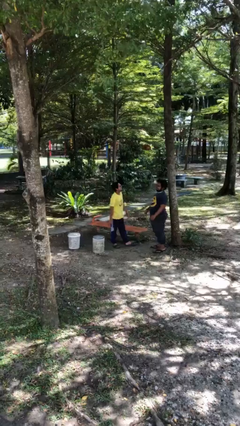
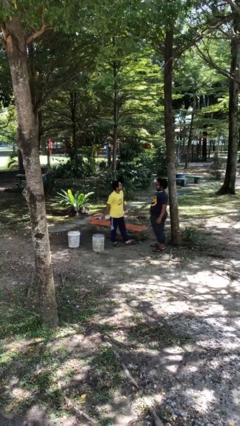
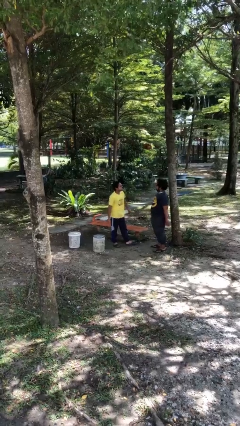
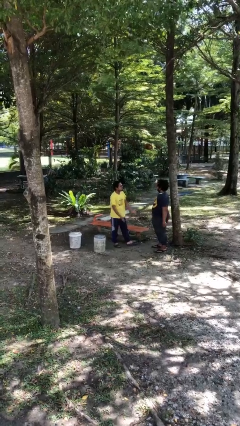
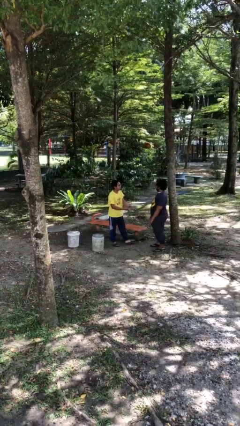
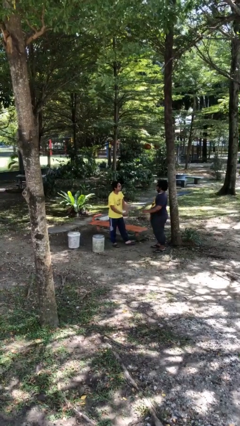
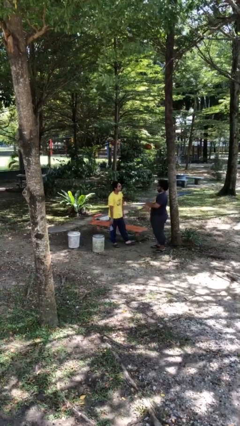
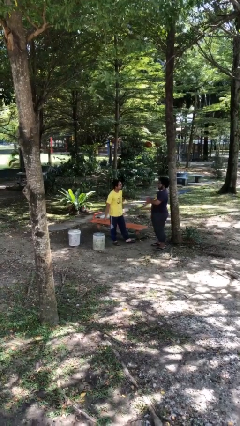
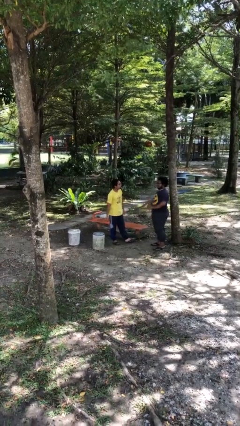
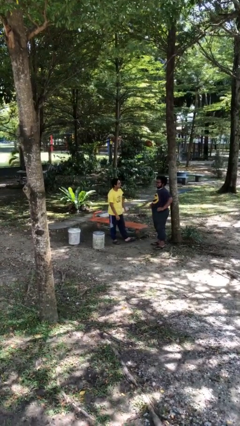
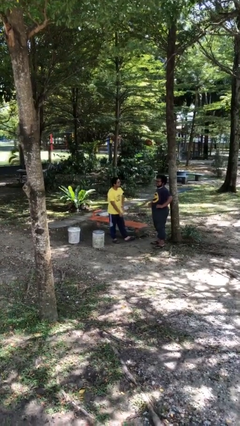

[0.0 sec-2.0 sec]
person talks to person

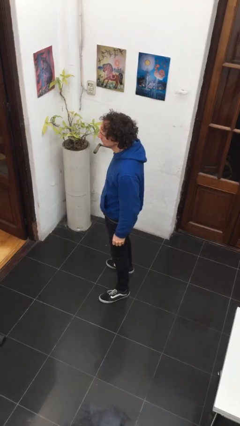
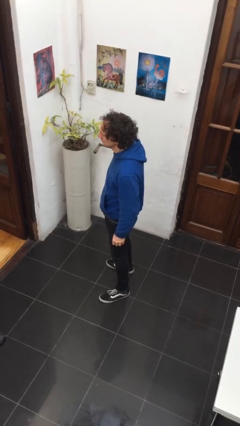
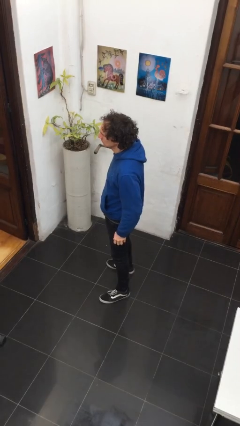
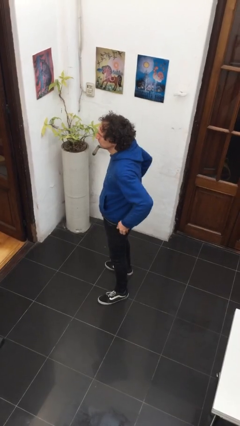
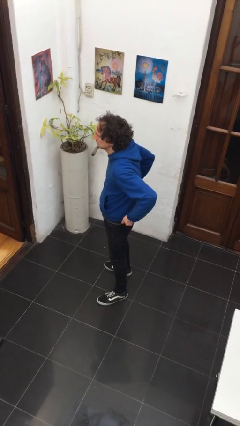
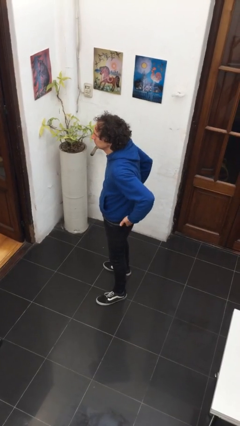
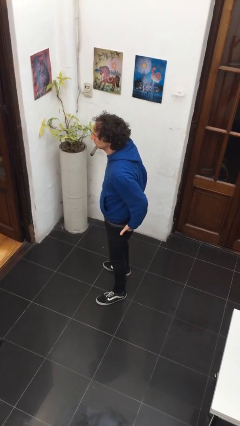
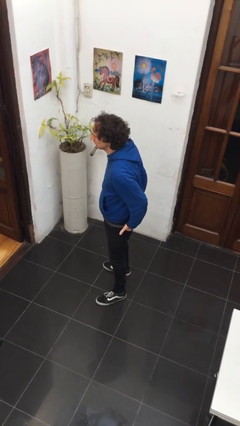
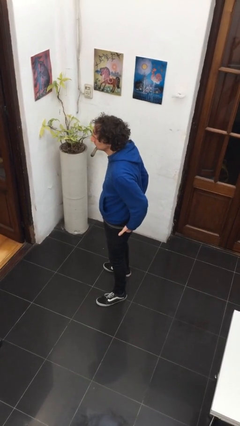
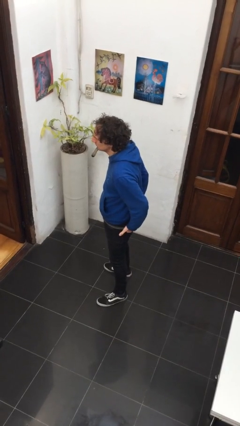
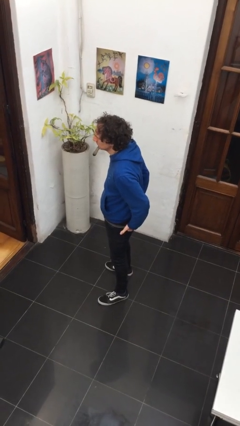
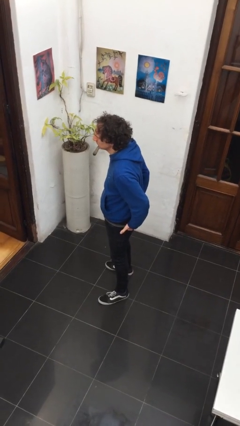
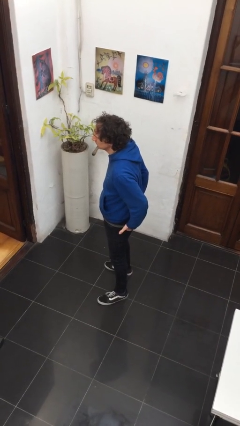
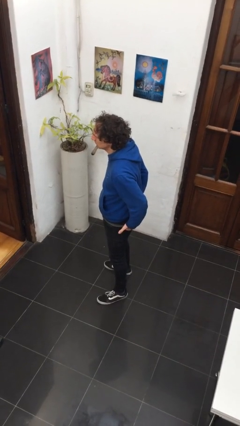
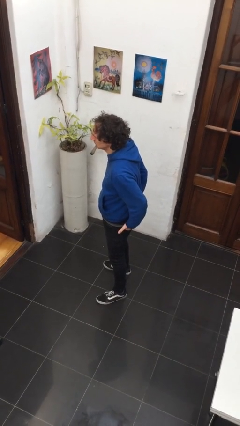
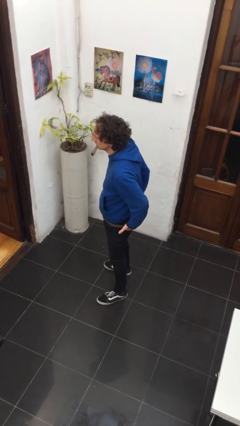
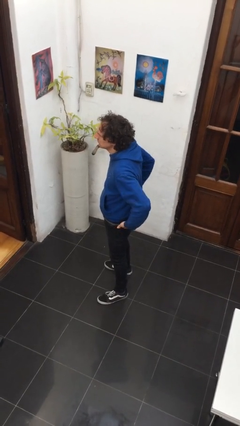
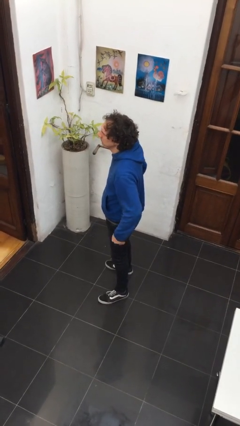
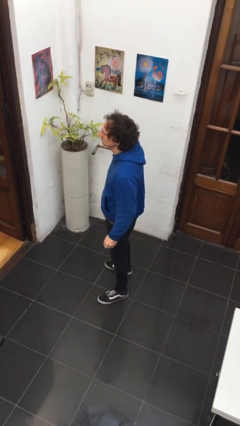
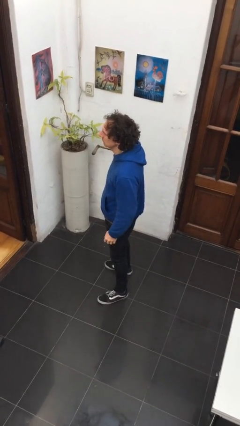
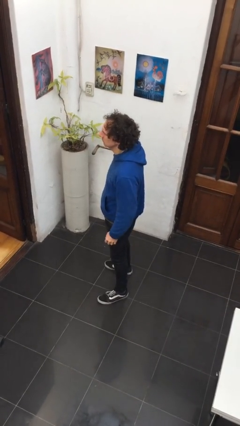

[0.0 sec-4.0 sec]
person puts hands in back pockets

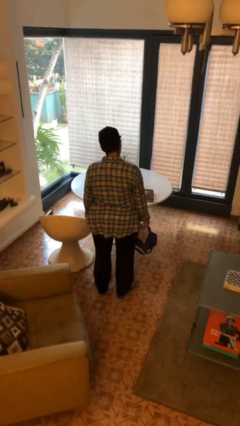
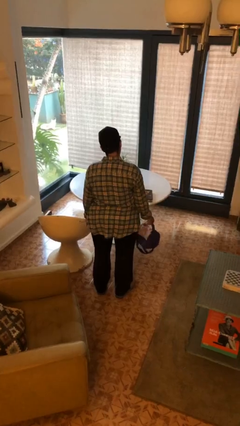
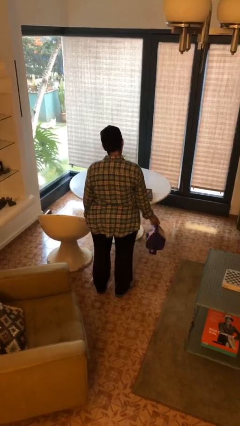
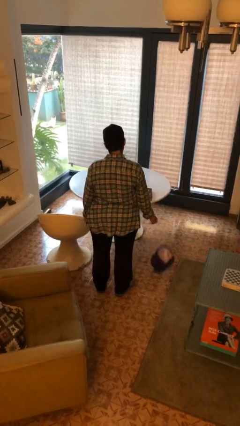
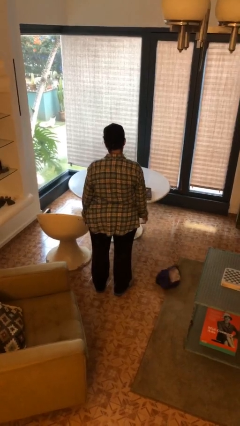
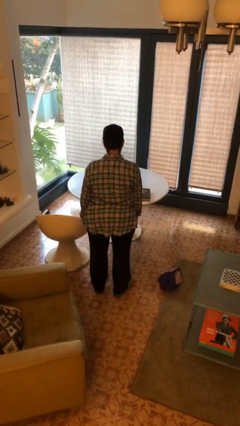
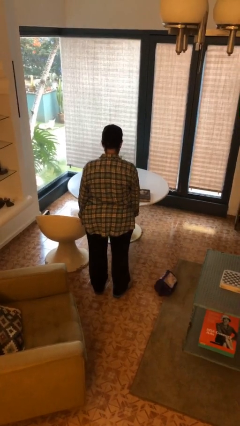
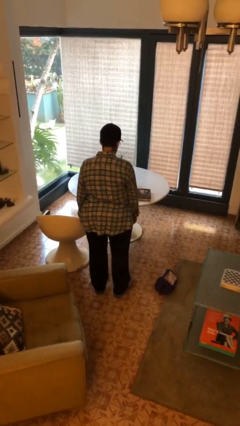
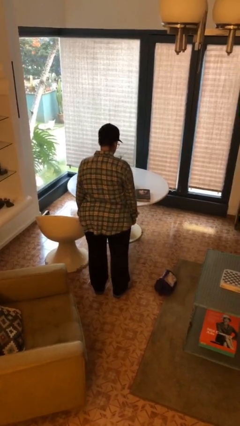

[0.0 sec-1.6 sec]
person drops object

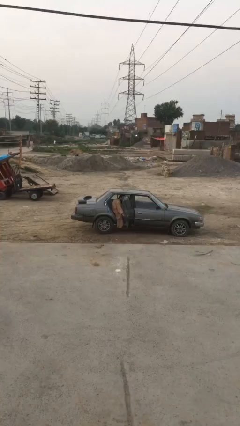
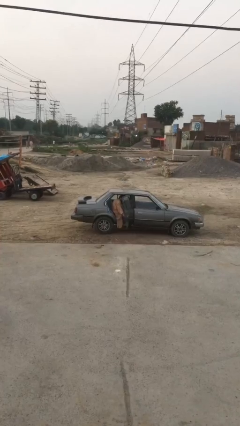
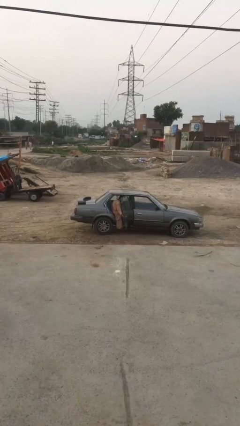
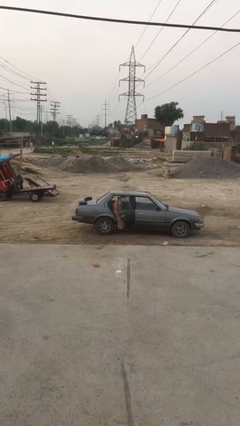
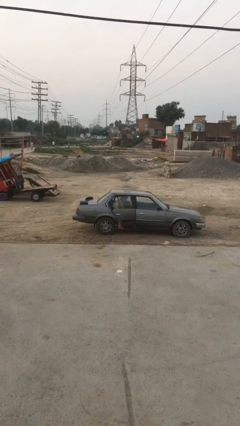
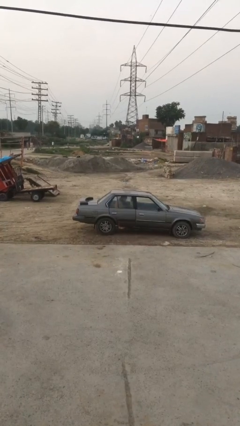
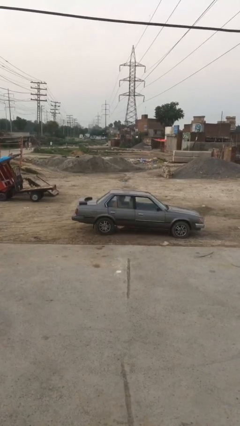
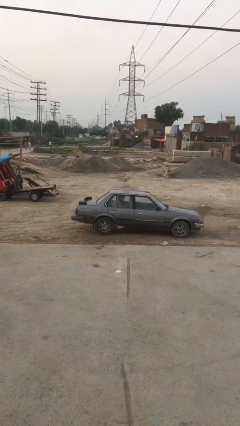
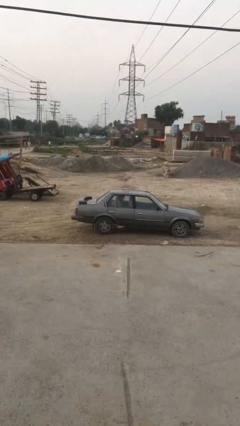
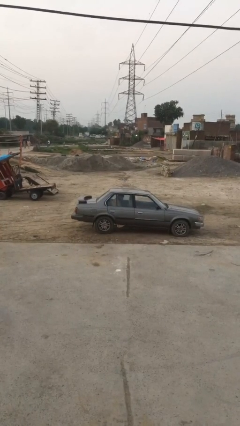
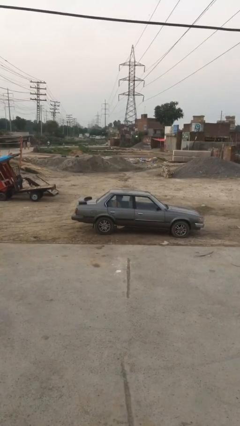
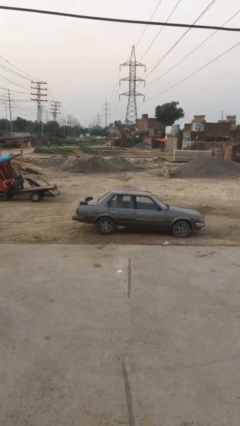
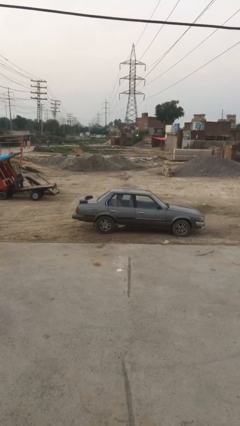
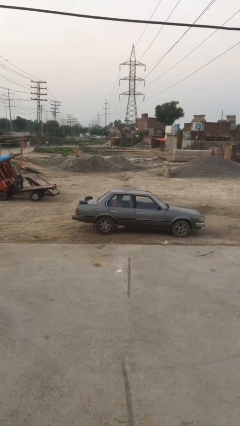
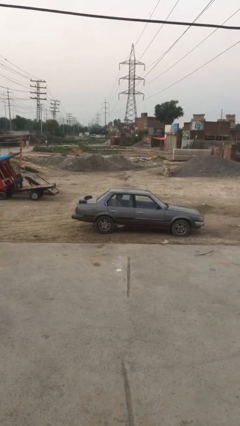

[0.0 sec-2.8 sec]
person closes car door

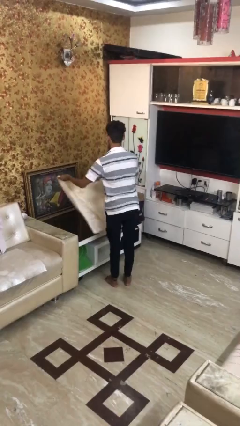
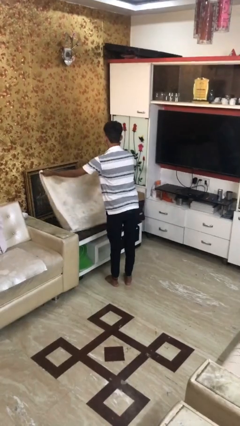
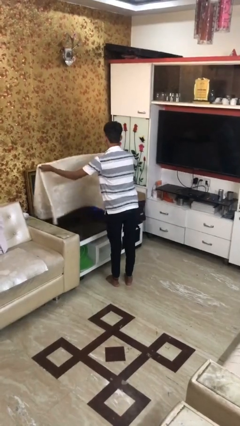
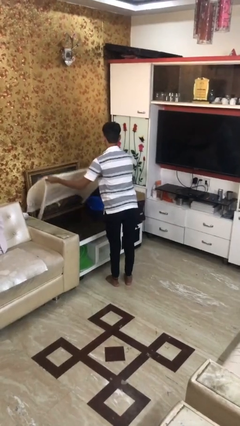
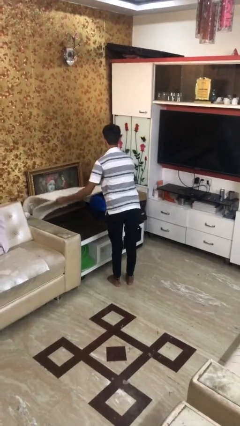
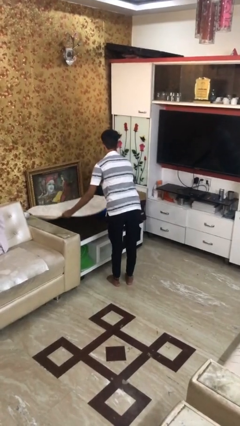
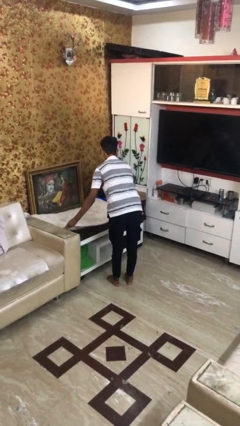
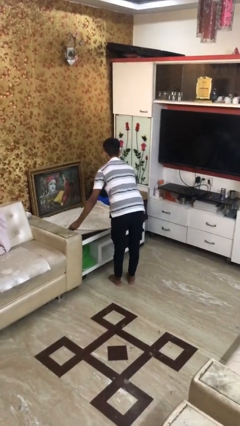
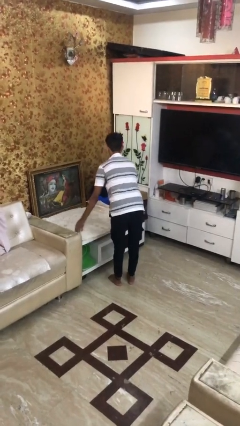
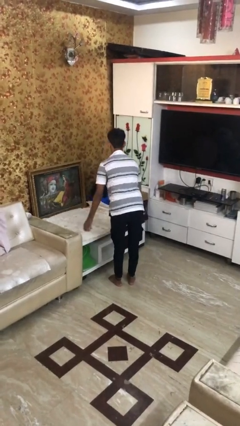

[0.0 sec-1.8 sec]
person spreads tablecloth

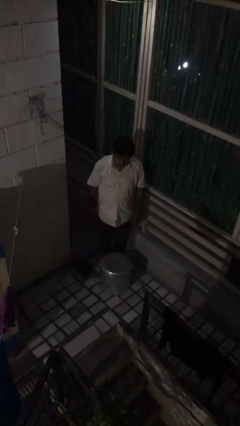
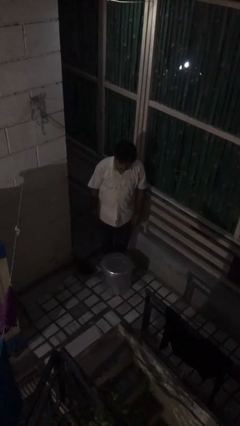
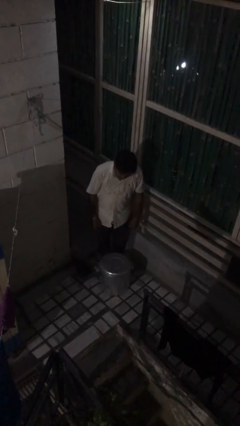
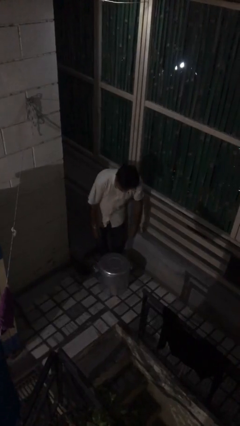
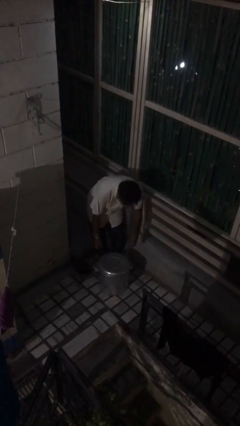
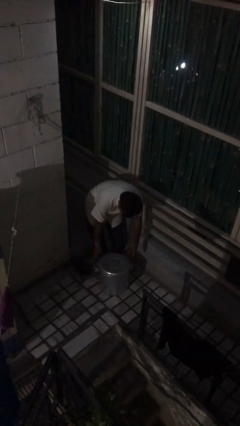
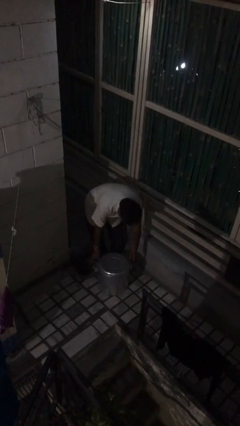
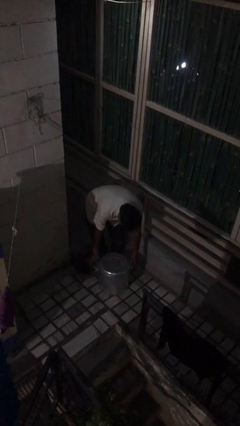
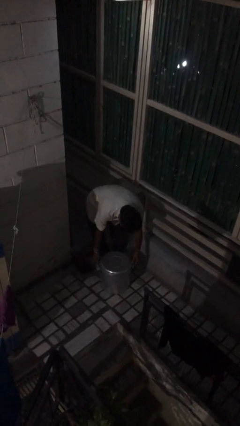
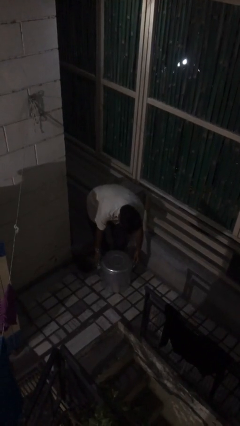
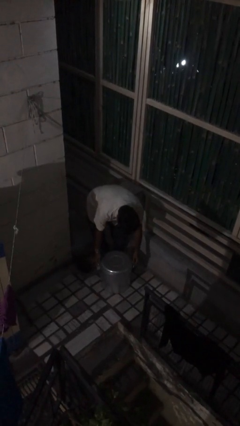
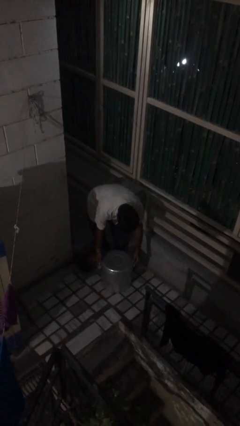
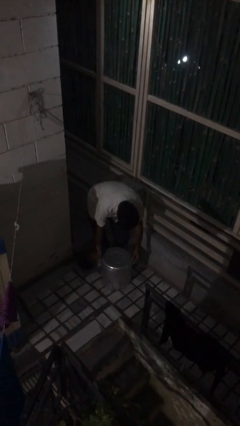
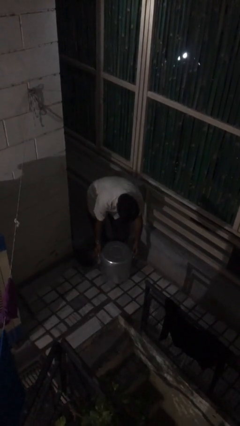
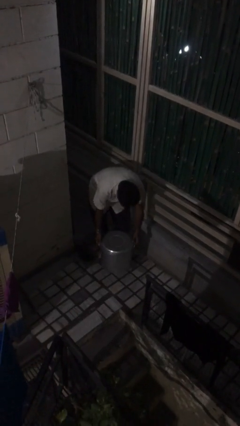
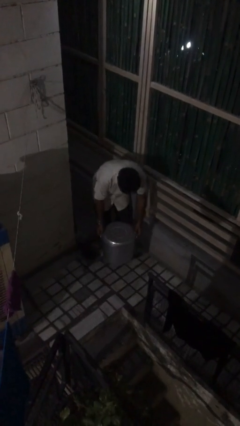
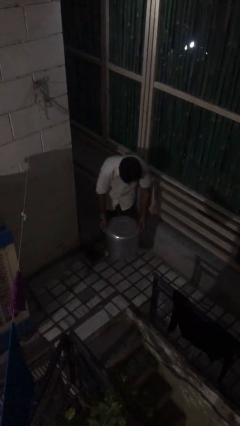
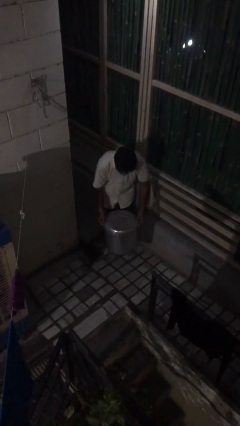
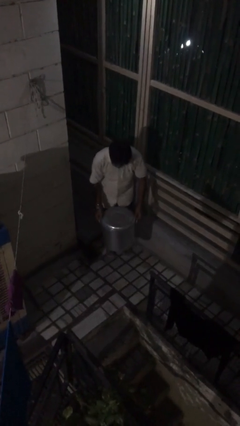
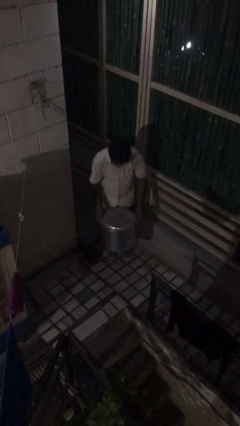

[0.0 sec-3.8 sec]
person picks up object from floor

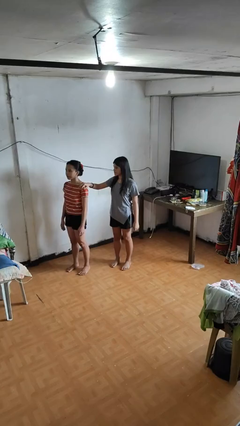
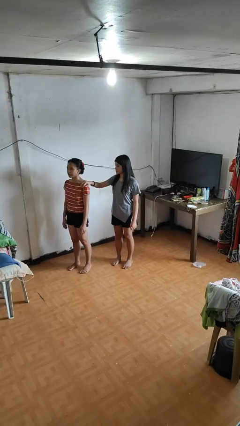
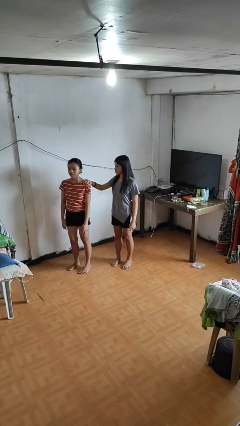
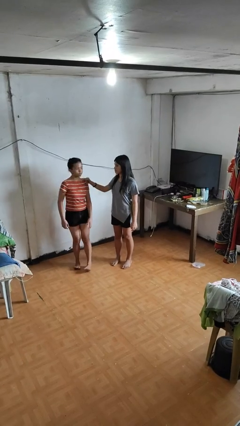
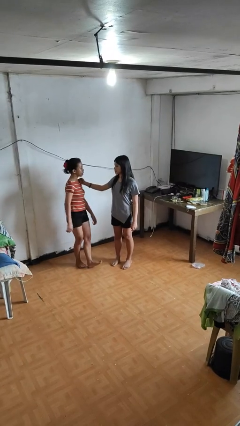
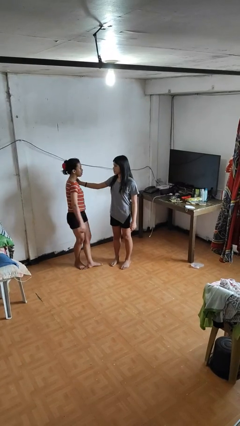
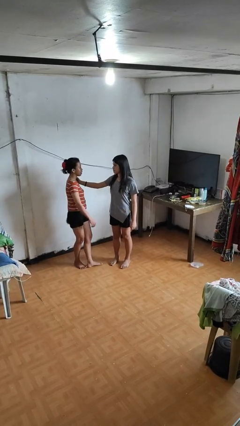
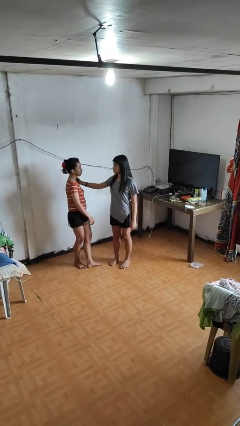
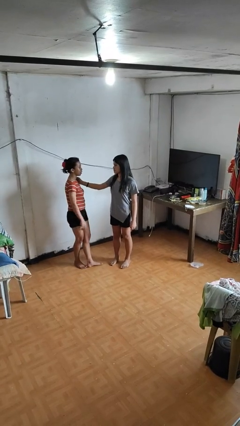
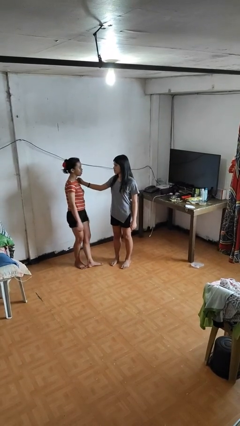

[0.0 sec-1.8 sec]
person spins person around
